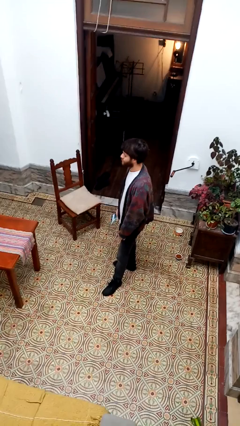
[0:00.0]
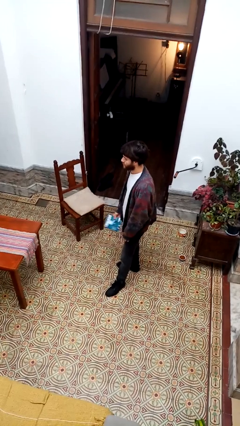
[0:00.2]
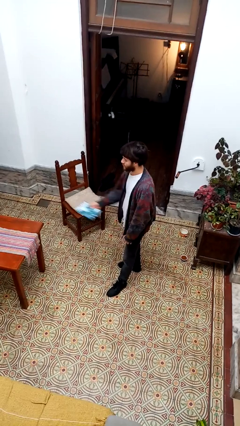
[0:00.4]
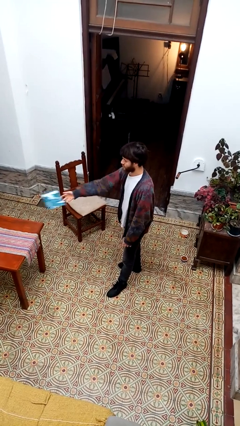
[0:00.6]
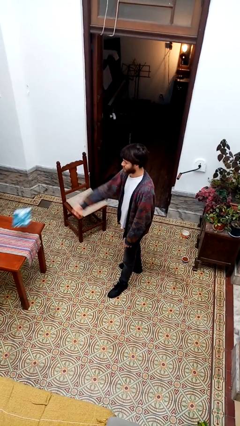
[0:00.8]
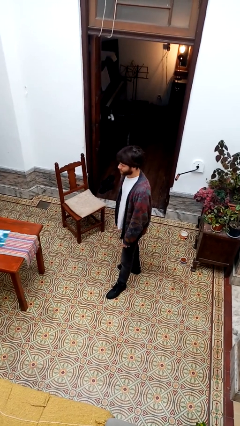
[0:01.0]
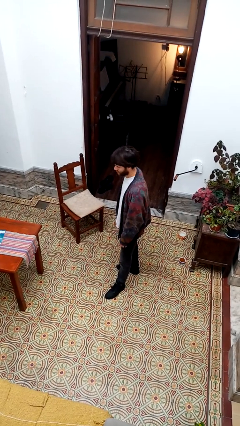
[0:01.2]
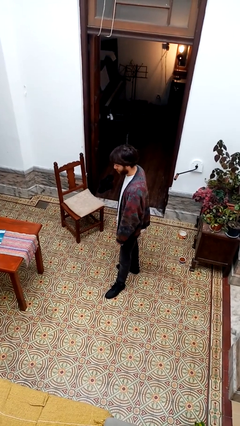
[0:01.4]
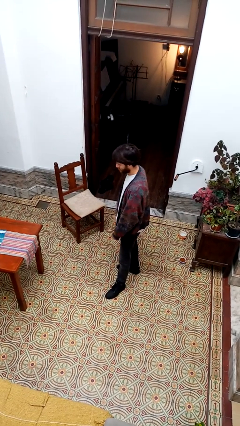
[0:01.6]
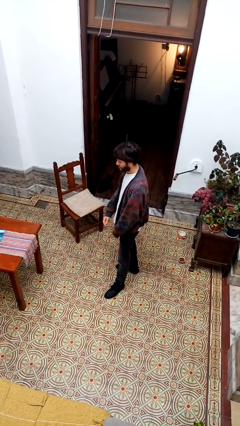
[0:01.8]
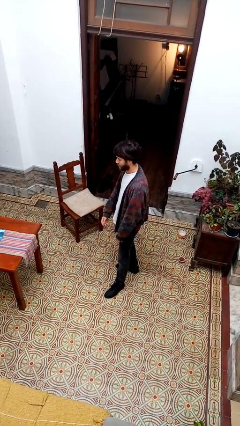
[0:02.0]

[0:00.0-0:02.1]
person throws object on table

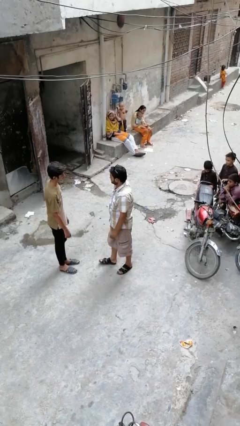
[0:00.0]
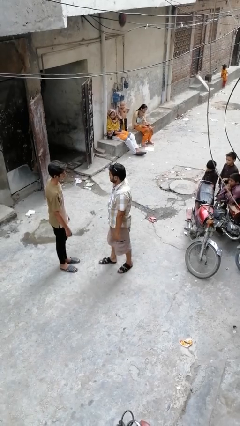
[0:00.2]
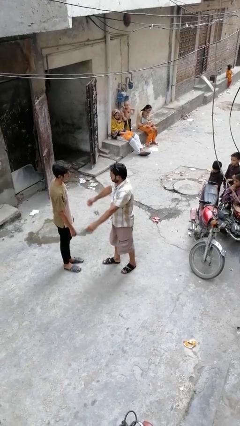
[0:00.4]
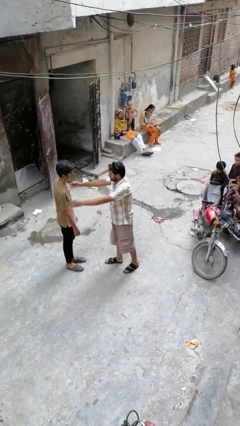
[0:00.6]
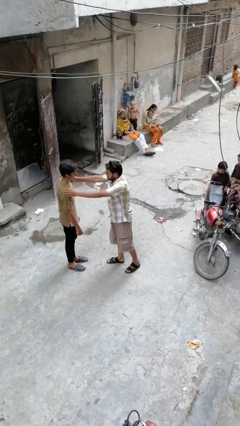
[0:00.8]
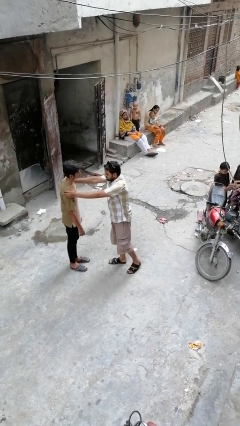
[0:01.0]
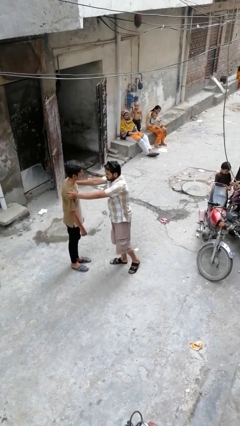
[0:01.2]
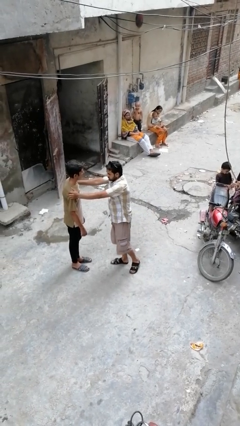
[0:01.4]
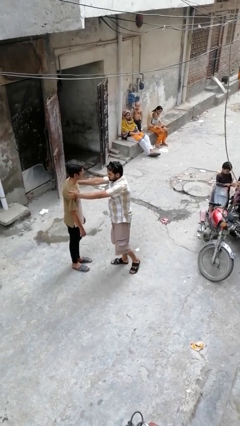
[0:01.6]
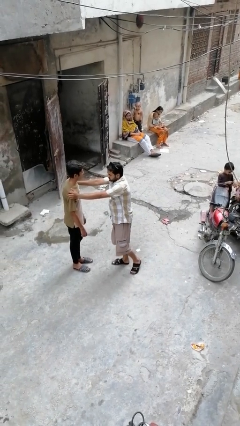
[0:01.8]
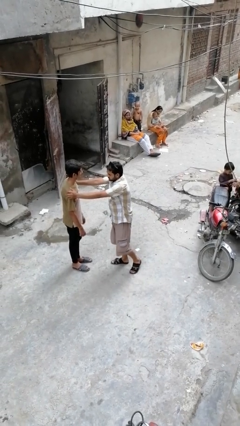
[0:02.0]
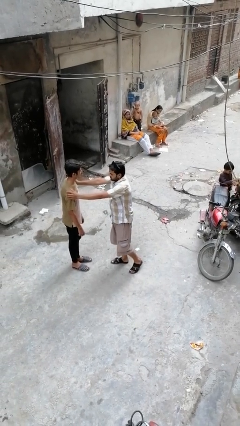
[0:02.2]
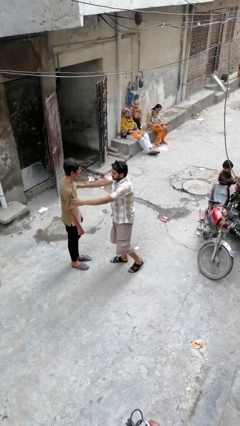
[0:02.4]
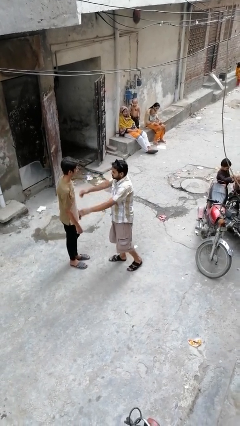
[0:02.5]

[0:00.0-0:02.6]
person pounds shoulders of person

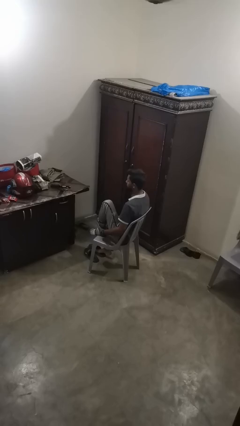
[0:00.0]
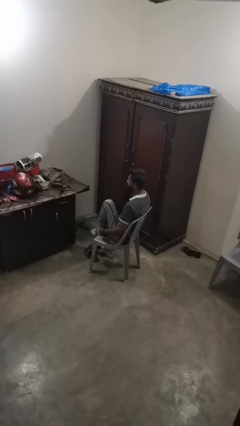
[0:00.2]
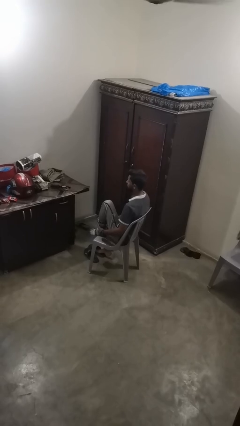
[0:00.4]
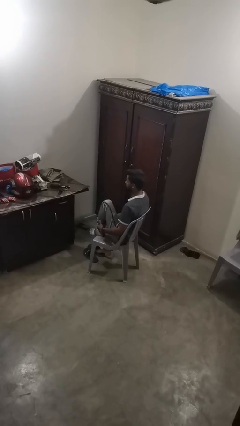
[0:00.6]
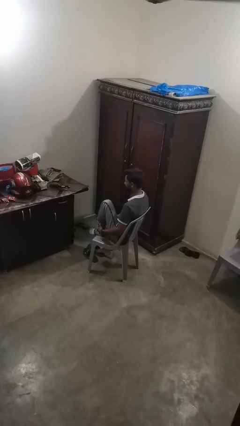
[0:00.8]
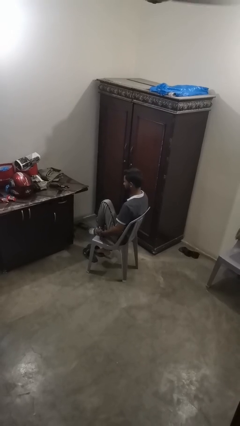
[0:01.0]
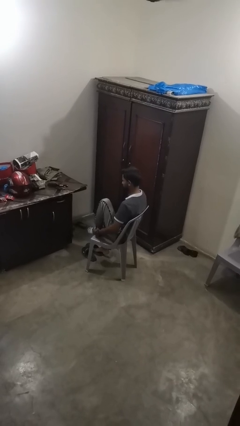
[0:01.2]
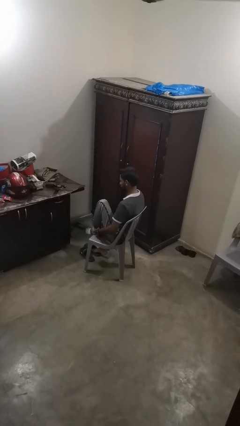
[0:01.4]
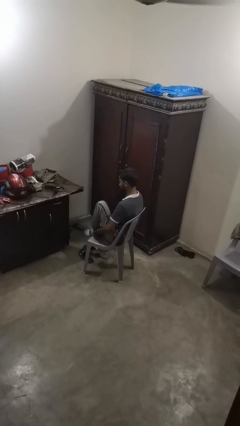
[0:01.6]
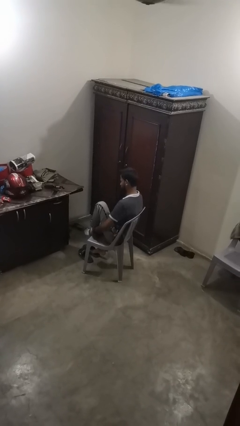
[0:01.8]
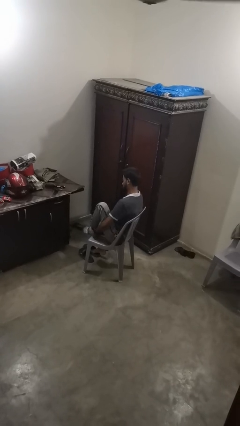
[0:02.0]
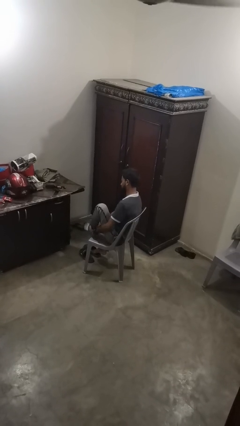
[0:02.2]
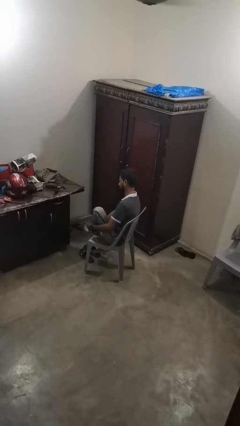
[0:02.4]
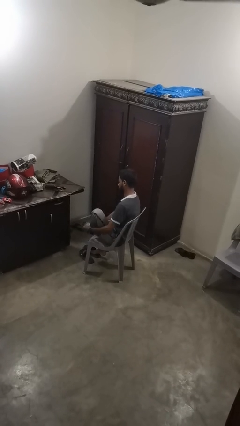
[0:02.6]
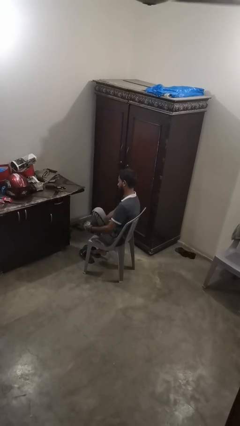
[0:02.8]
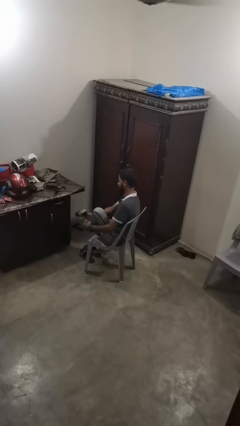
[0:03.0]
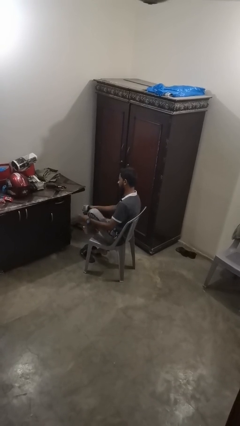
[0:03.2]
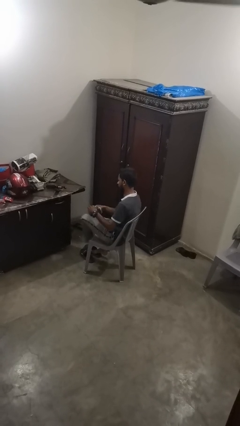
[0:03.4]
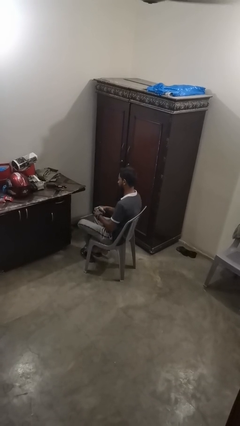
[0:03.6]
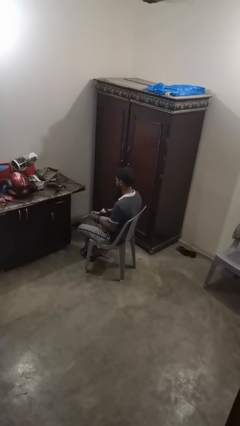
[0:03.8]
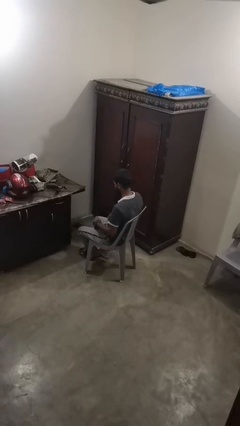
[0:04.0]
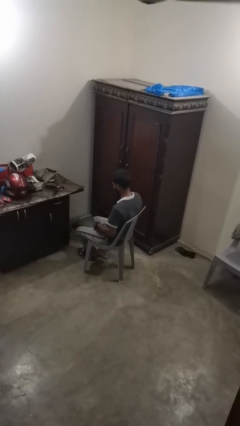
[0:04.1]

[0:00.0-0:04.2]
person takes off socks

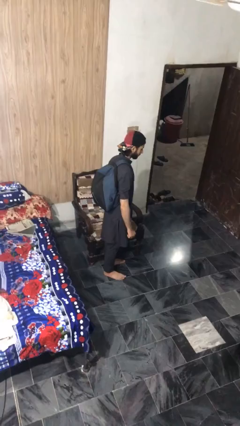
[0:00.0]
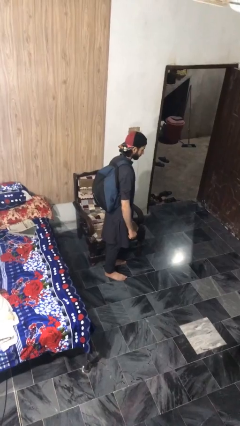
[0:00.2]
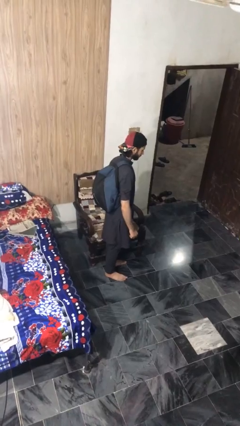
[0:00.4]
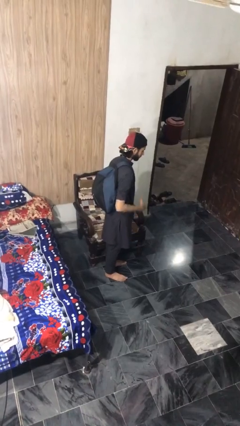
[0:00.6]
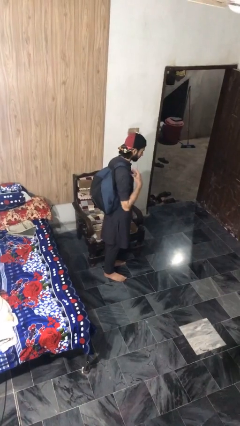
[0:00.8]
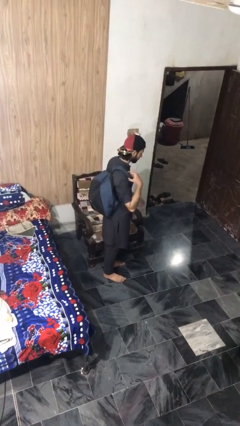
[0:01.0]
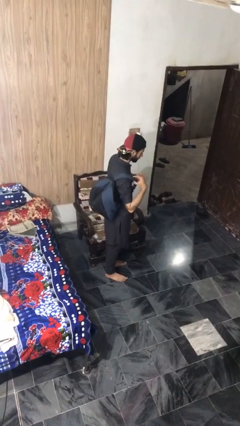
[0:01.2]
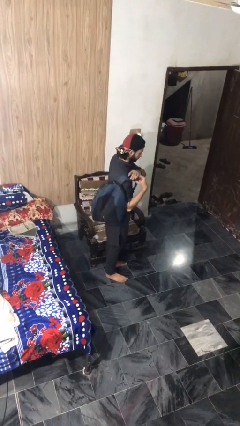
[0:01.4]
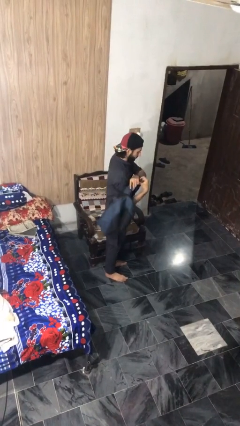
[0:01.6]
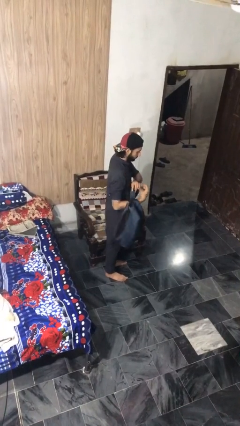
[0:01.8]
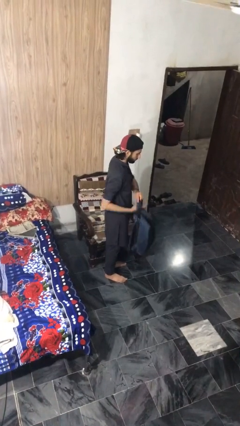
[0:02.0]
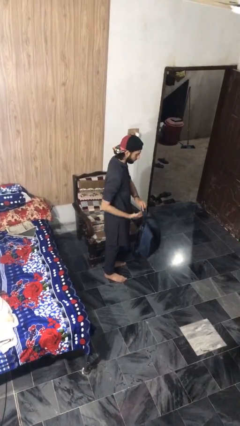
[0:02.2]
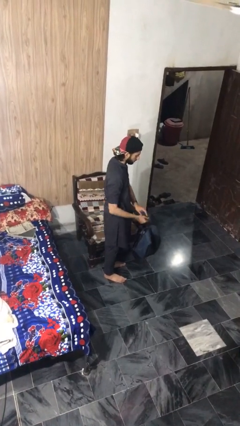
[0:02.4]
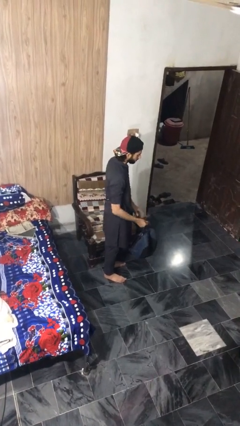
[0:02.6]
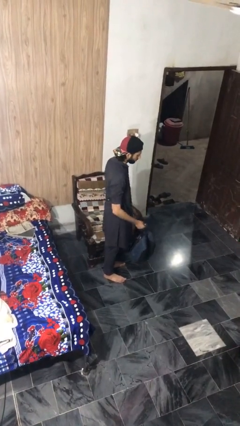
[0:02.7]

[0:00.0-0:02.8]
person takes off backpack

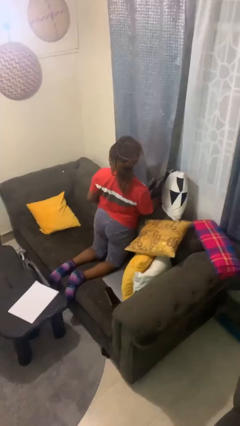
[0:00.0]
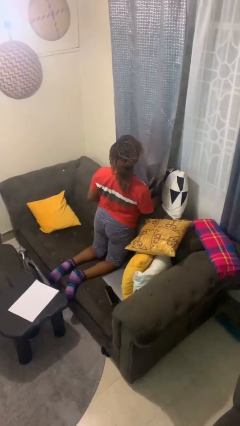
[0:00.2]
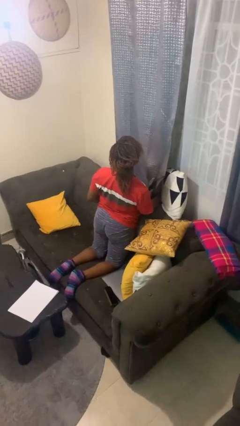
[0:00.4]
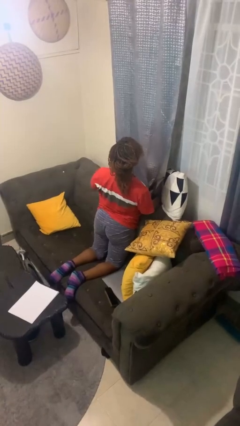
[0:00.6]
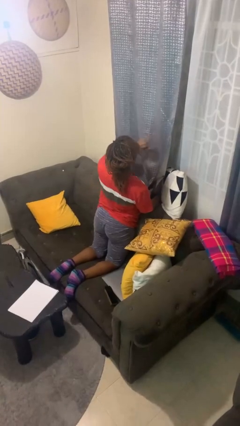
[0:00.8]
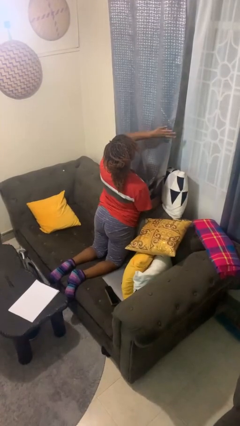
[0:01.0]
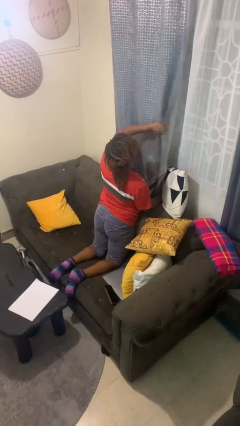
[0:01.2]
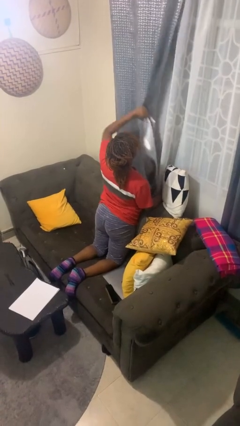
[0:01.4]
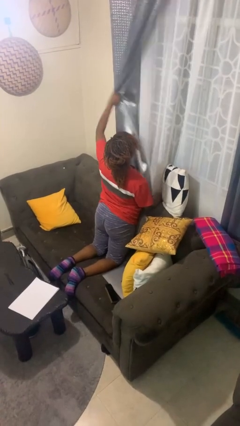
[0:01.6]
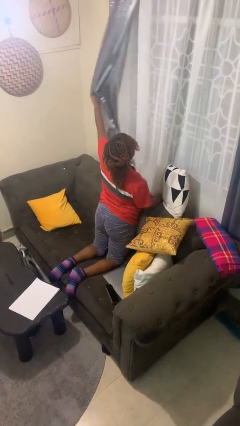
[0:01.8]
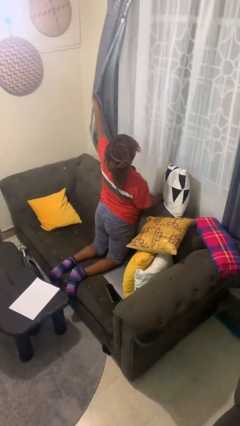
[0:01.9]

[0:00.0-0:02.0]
person opens curtains

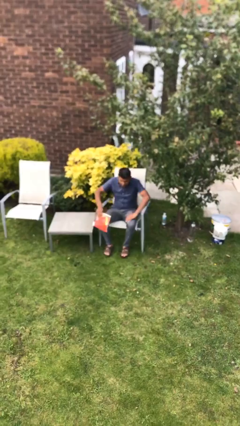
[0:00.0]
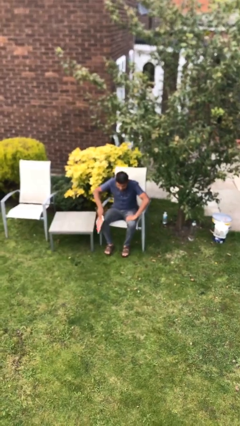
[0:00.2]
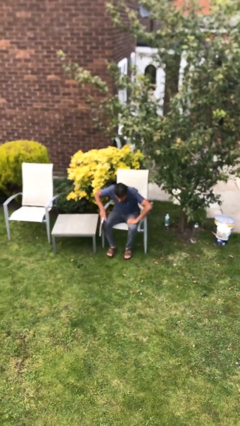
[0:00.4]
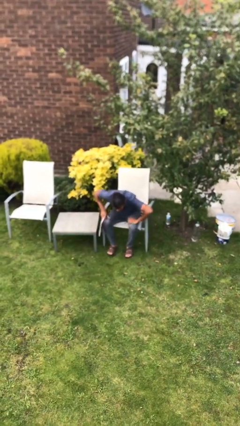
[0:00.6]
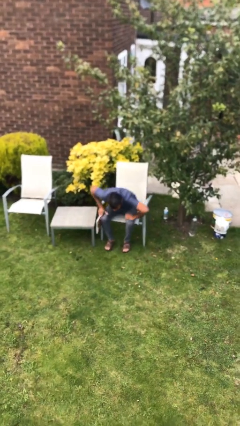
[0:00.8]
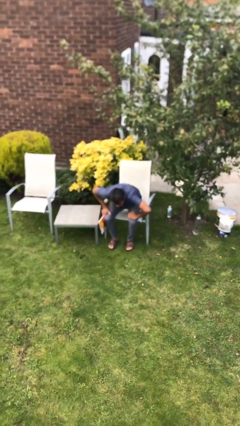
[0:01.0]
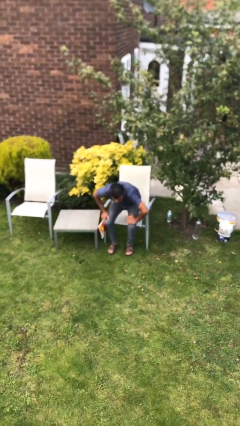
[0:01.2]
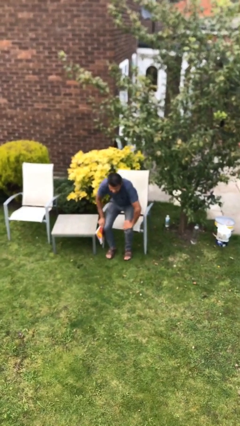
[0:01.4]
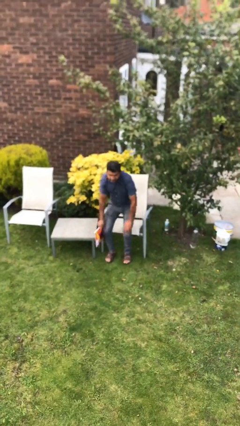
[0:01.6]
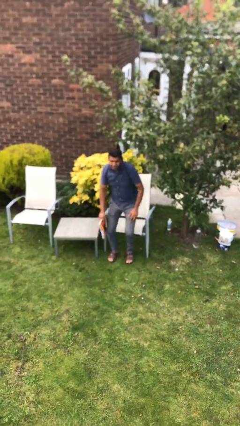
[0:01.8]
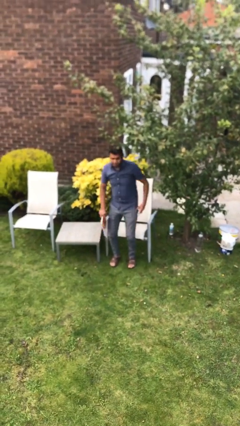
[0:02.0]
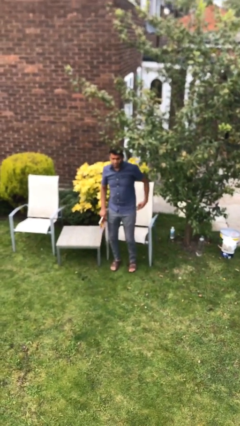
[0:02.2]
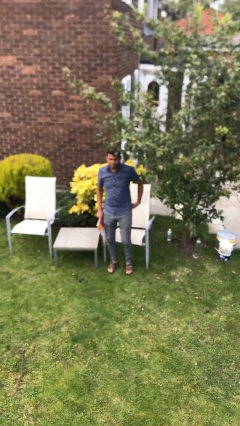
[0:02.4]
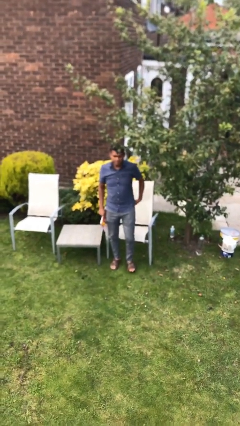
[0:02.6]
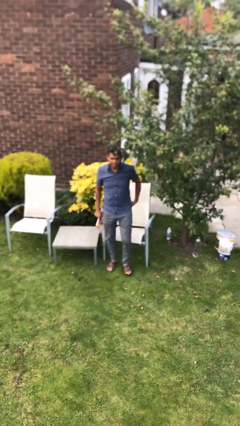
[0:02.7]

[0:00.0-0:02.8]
person stands up

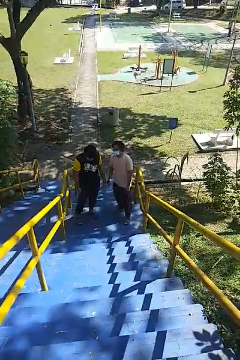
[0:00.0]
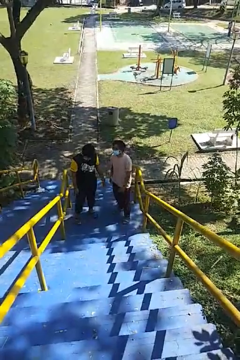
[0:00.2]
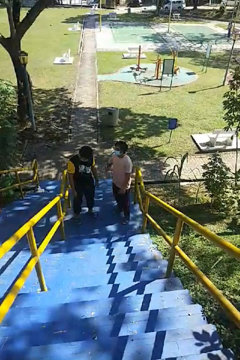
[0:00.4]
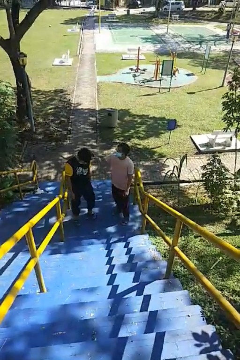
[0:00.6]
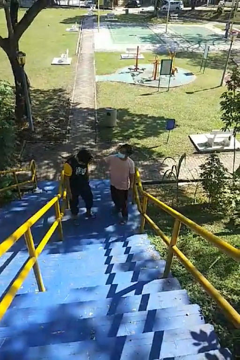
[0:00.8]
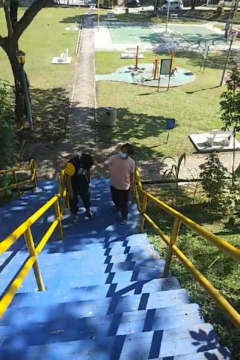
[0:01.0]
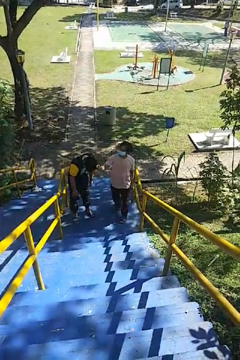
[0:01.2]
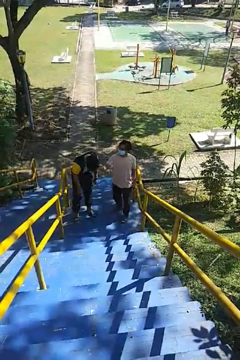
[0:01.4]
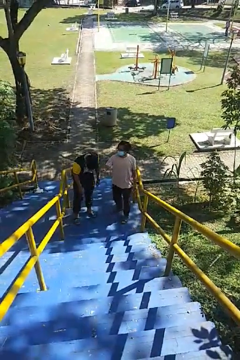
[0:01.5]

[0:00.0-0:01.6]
person grabs person by hair
